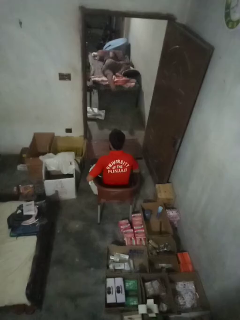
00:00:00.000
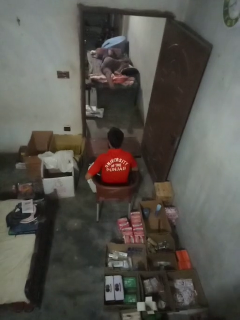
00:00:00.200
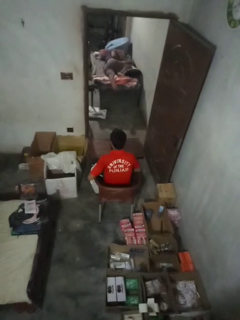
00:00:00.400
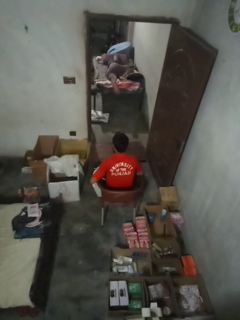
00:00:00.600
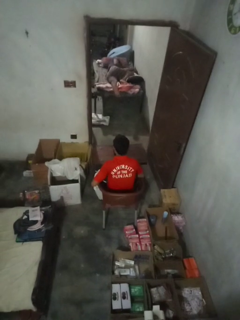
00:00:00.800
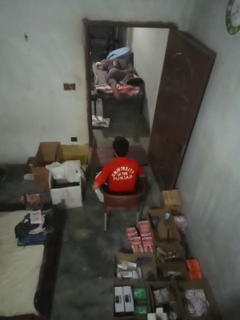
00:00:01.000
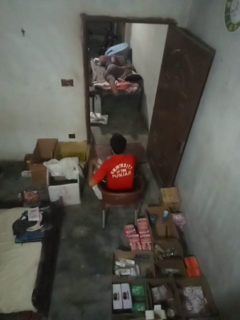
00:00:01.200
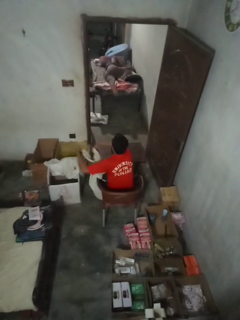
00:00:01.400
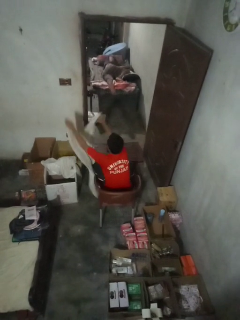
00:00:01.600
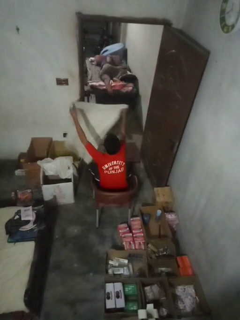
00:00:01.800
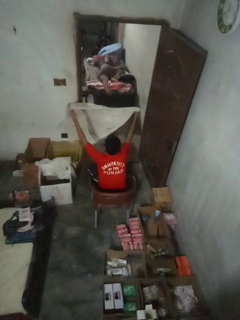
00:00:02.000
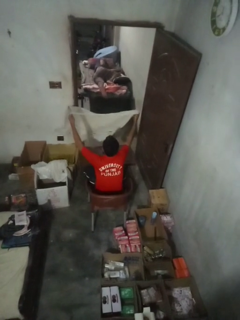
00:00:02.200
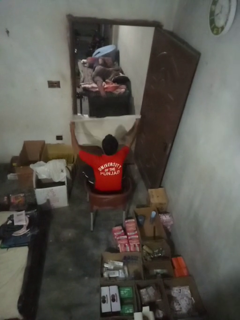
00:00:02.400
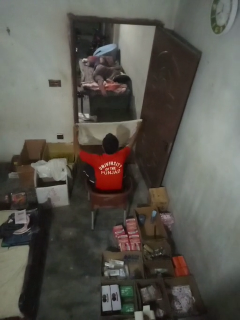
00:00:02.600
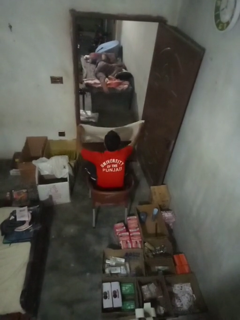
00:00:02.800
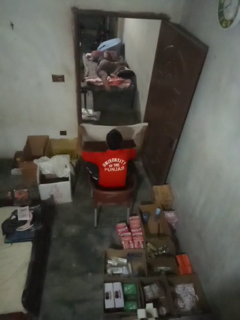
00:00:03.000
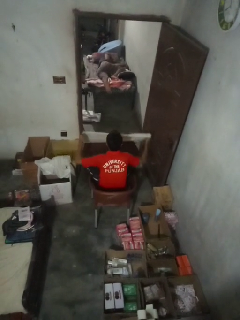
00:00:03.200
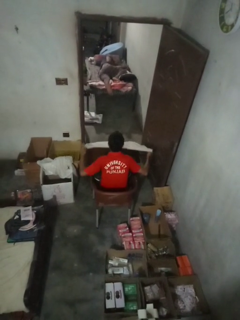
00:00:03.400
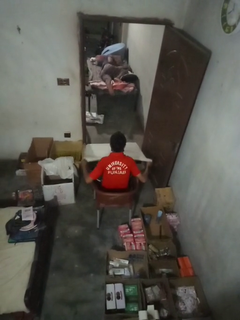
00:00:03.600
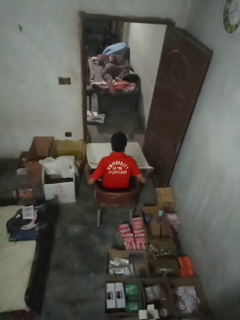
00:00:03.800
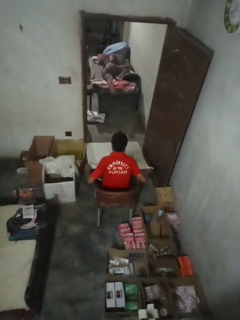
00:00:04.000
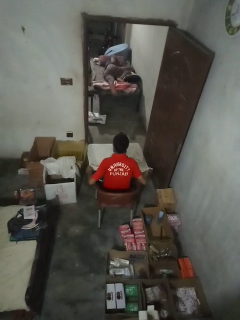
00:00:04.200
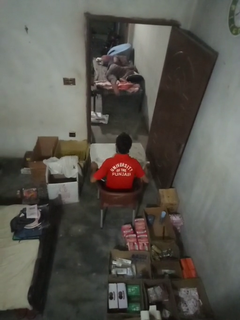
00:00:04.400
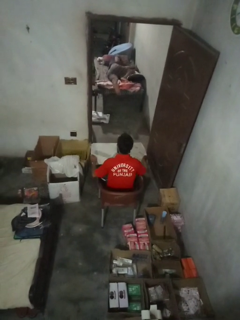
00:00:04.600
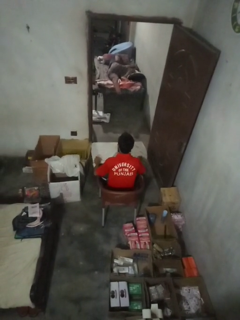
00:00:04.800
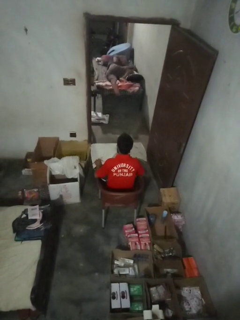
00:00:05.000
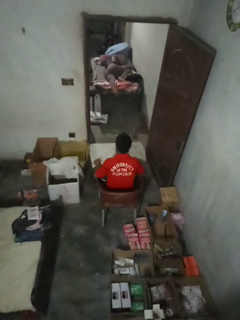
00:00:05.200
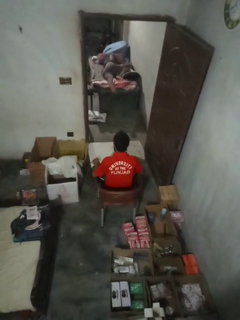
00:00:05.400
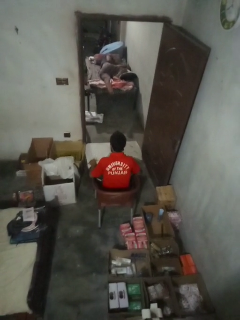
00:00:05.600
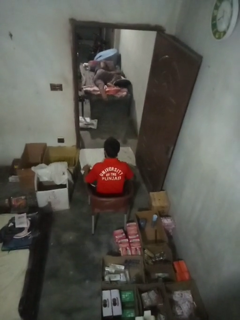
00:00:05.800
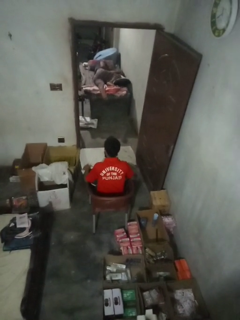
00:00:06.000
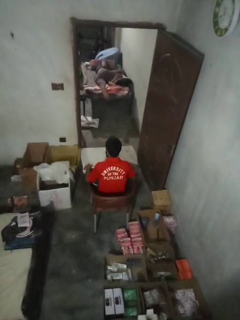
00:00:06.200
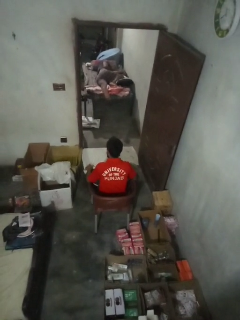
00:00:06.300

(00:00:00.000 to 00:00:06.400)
person spreads tablecloth

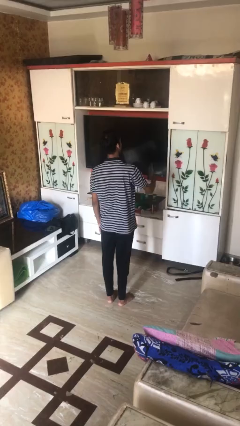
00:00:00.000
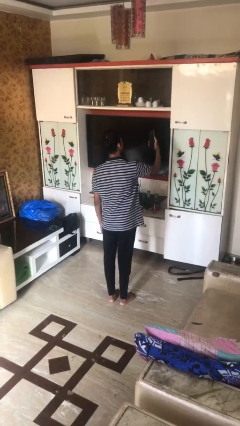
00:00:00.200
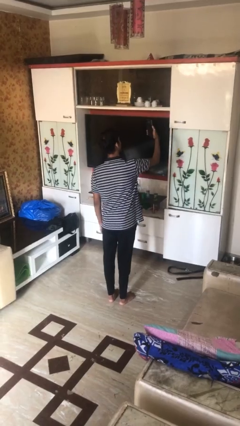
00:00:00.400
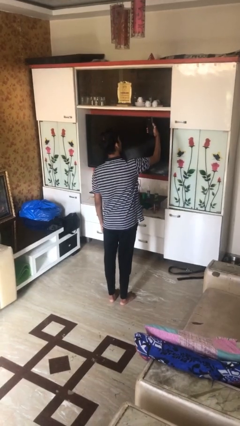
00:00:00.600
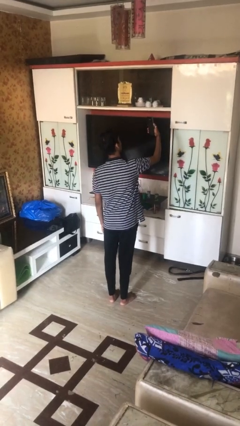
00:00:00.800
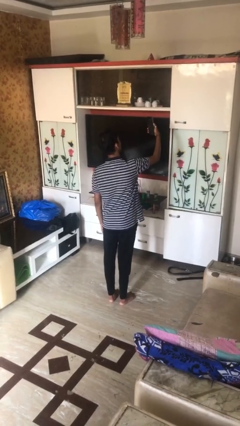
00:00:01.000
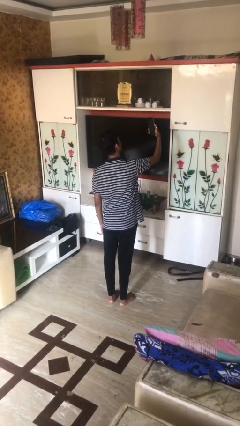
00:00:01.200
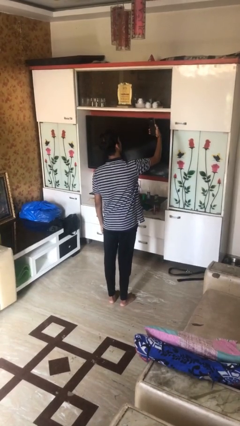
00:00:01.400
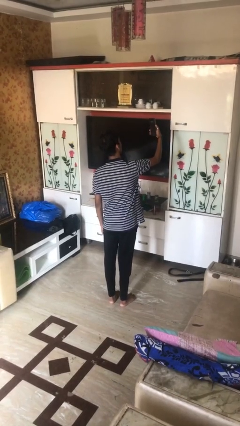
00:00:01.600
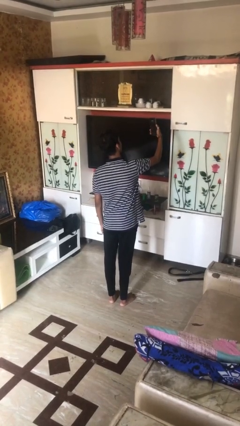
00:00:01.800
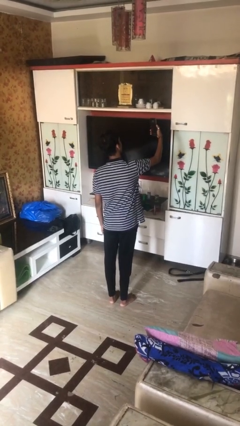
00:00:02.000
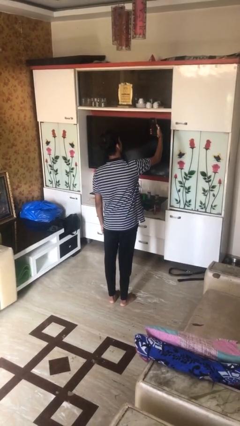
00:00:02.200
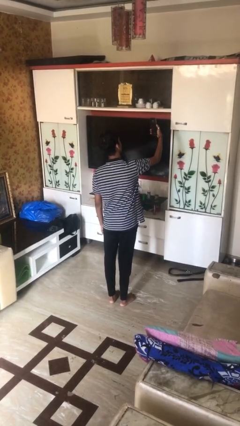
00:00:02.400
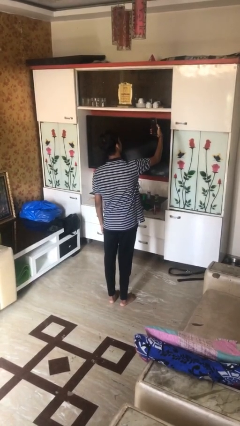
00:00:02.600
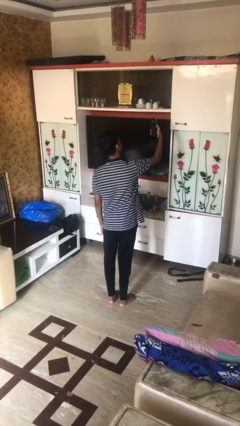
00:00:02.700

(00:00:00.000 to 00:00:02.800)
person takes selfie

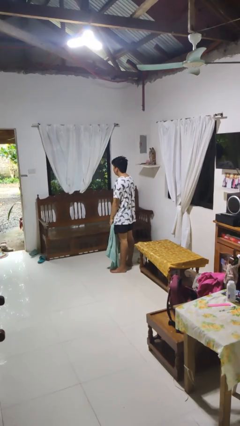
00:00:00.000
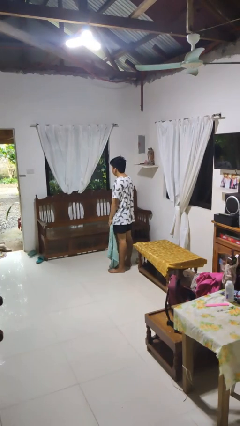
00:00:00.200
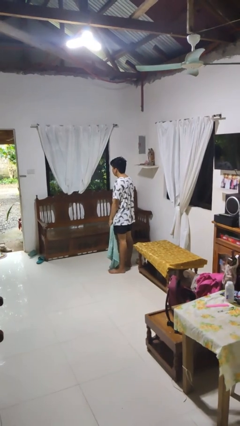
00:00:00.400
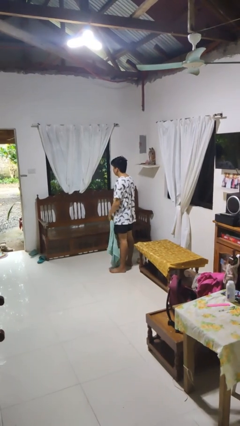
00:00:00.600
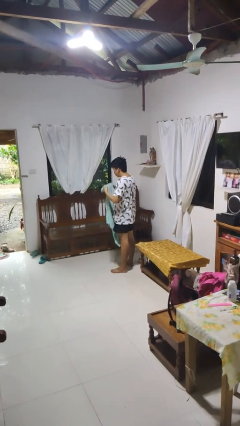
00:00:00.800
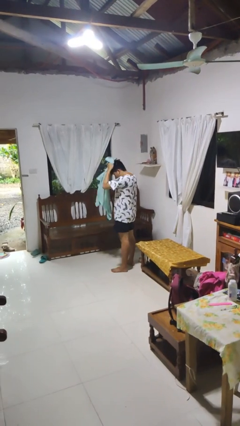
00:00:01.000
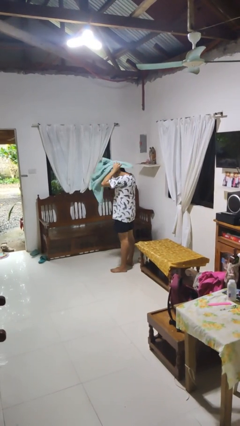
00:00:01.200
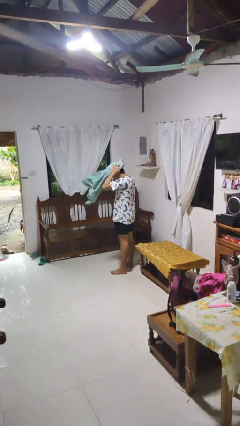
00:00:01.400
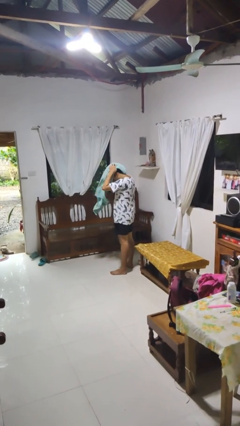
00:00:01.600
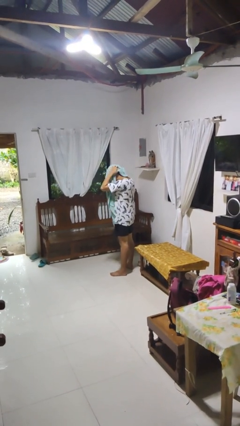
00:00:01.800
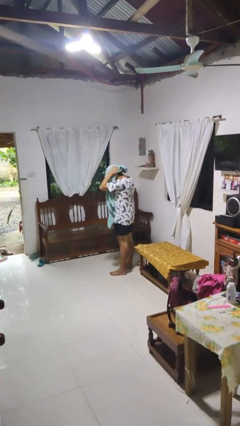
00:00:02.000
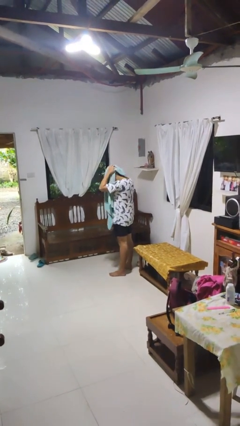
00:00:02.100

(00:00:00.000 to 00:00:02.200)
person dries hair with towel

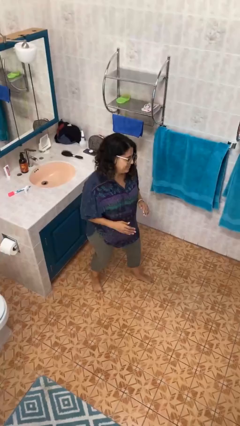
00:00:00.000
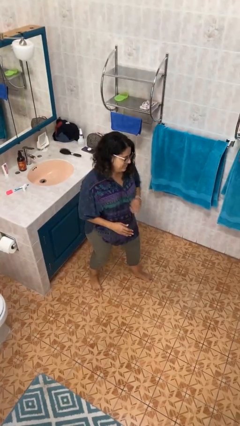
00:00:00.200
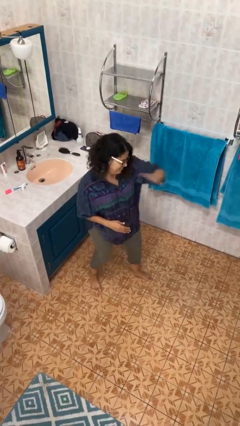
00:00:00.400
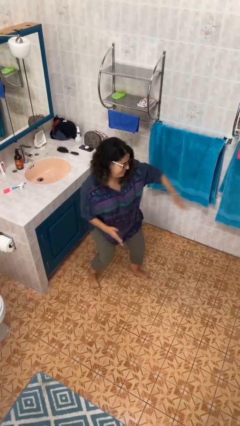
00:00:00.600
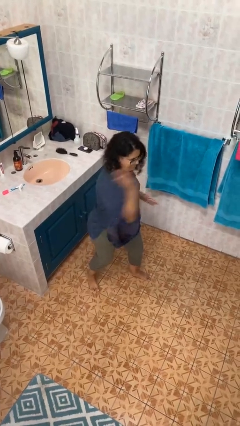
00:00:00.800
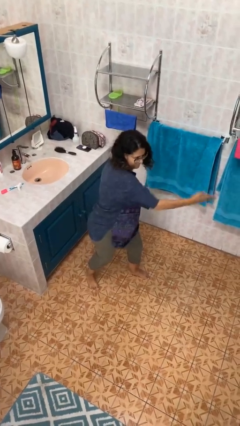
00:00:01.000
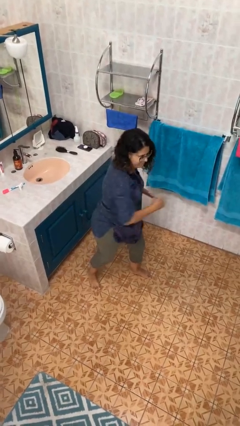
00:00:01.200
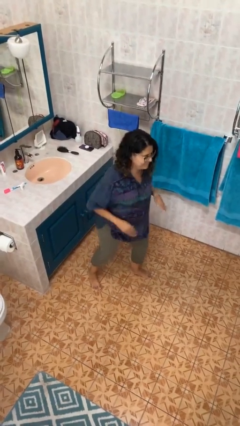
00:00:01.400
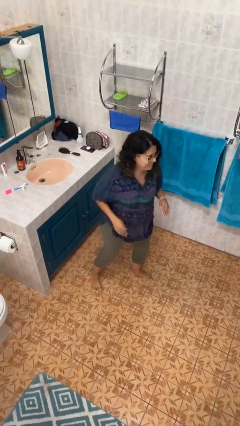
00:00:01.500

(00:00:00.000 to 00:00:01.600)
person karate chop

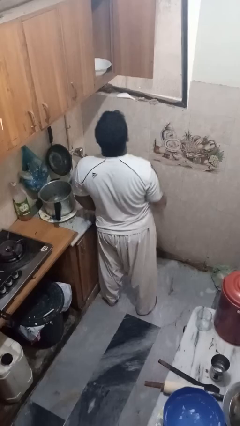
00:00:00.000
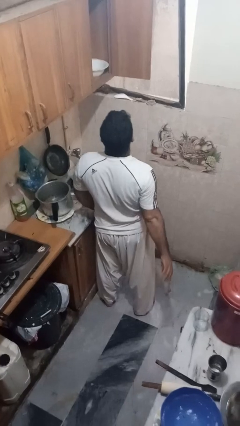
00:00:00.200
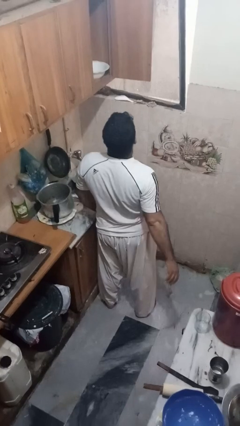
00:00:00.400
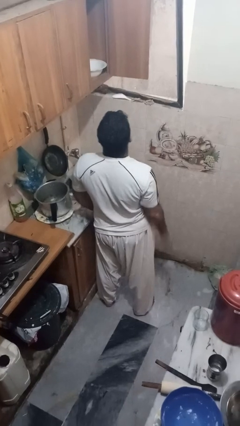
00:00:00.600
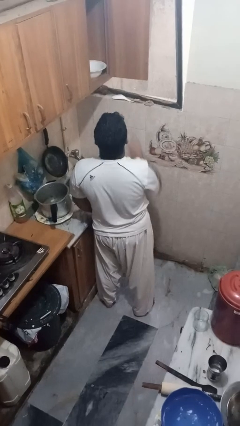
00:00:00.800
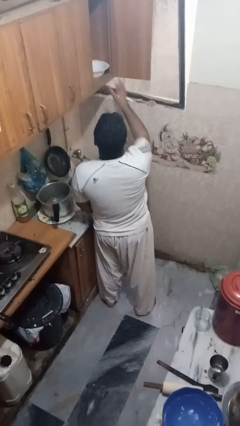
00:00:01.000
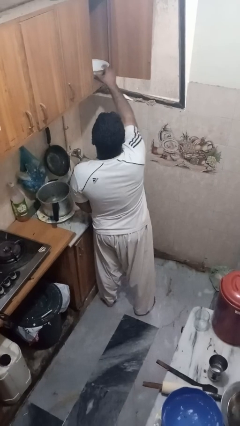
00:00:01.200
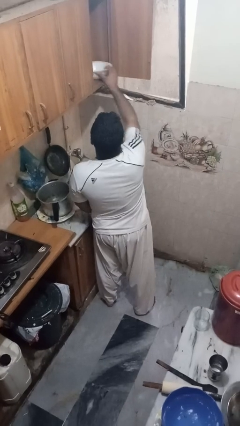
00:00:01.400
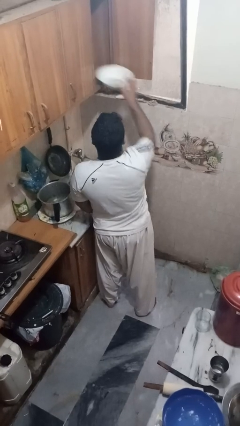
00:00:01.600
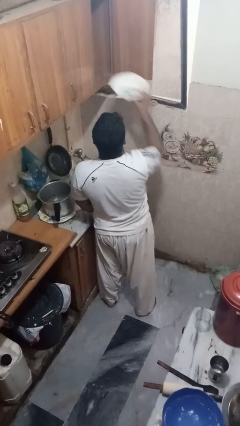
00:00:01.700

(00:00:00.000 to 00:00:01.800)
person takes object from cabinet

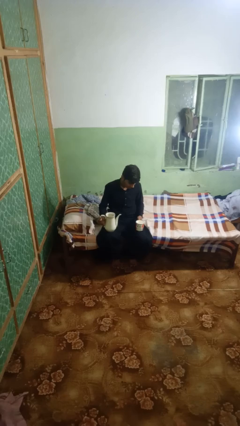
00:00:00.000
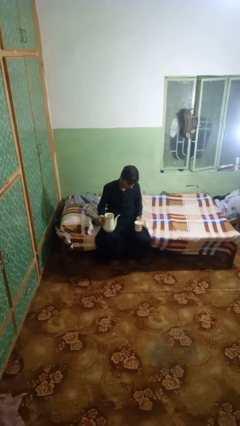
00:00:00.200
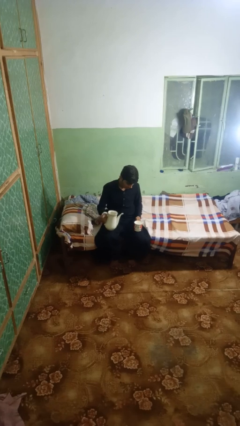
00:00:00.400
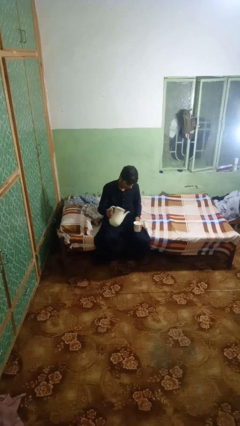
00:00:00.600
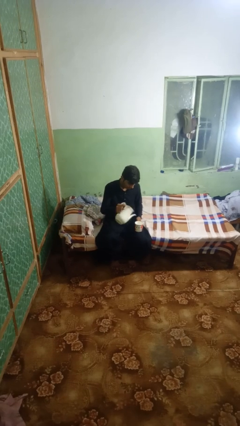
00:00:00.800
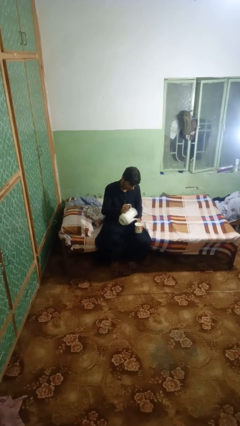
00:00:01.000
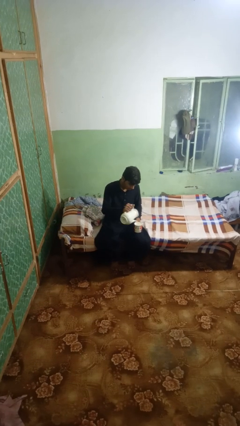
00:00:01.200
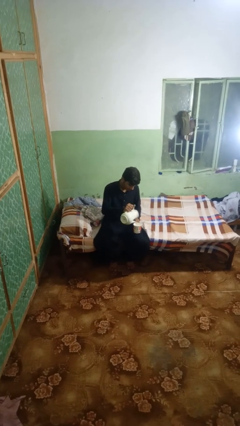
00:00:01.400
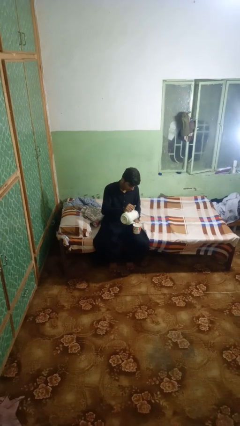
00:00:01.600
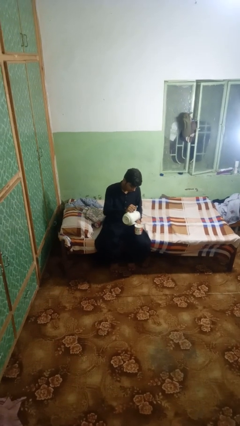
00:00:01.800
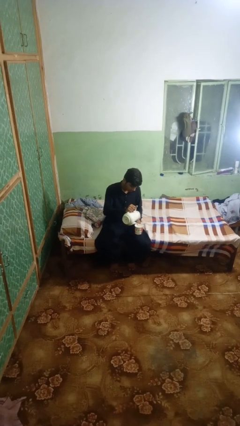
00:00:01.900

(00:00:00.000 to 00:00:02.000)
person pours coffee into mug

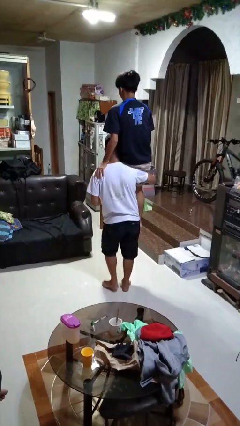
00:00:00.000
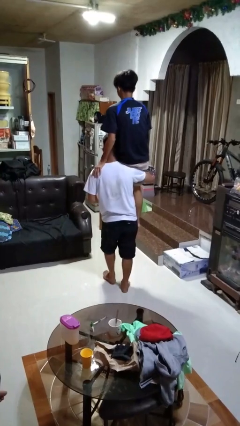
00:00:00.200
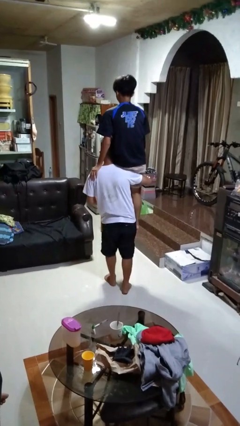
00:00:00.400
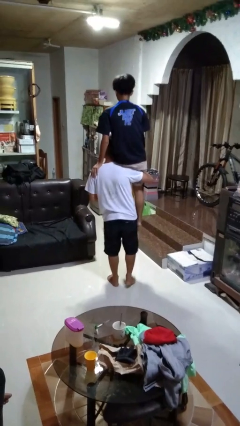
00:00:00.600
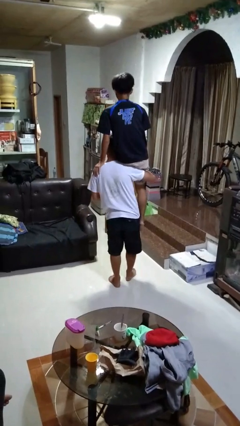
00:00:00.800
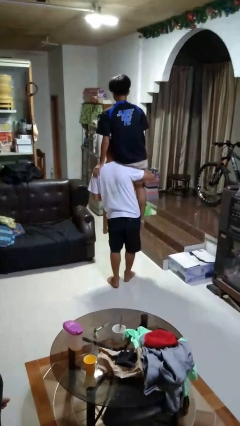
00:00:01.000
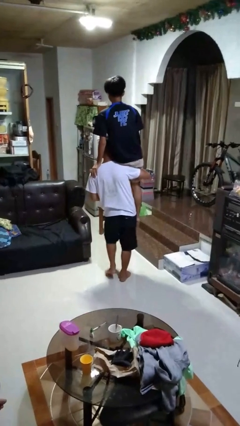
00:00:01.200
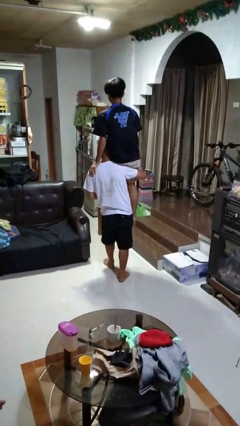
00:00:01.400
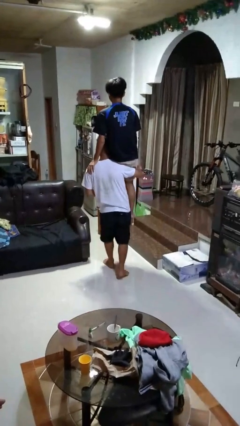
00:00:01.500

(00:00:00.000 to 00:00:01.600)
person carries person on shoulders
